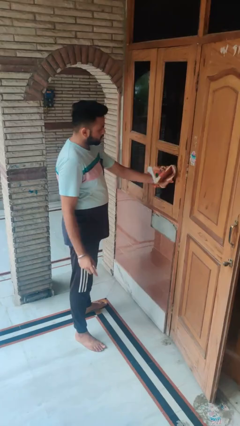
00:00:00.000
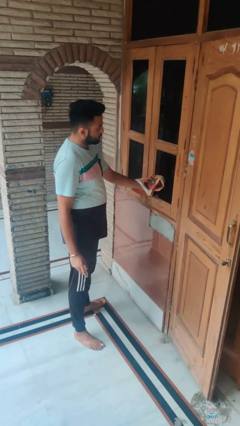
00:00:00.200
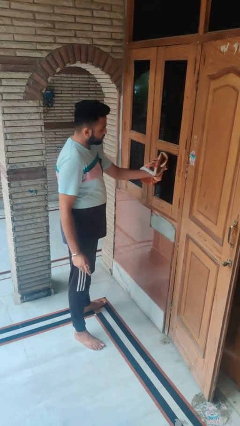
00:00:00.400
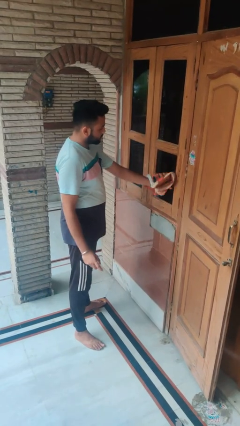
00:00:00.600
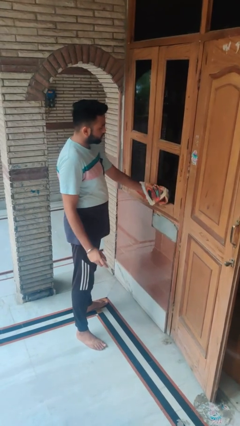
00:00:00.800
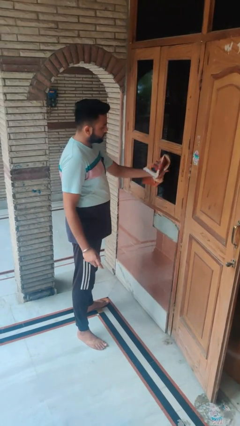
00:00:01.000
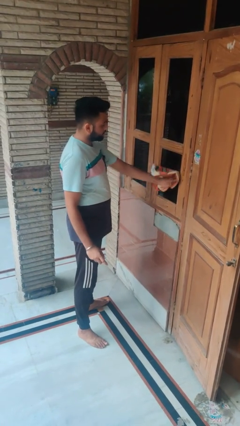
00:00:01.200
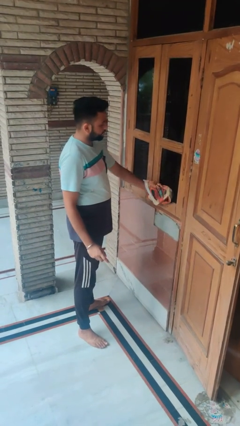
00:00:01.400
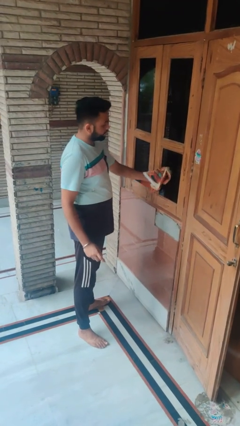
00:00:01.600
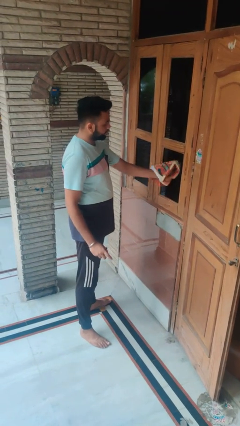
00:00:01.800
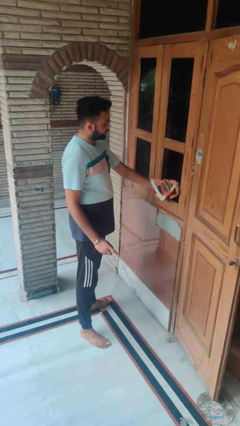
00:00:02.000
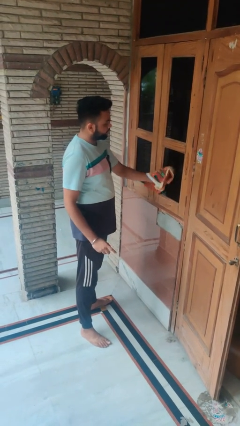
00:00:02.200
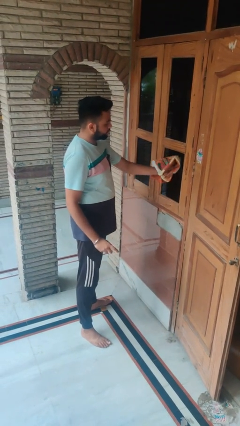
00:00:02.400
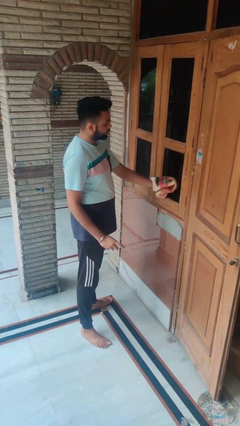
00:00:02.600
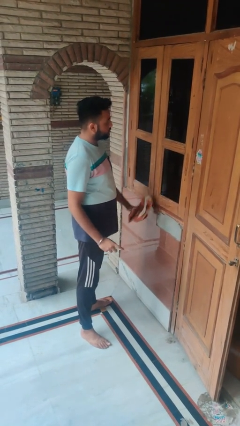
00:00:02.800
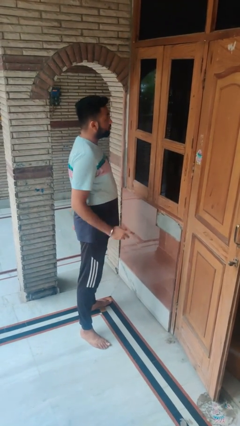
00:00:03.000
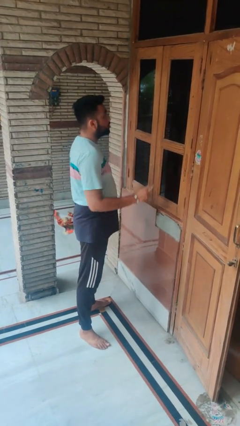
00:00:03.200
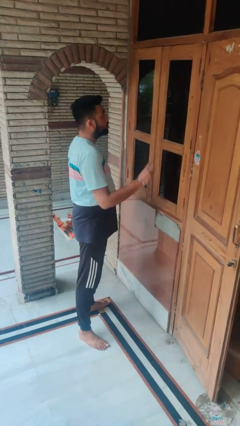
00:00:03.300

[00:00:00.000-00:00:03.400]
person washes window

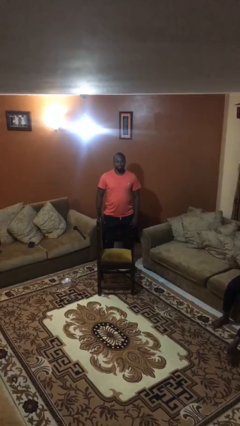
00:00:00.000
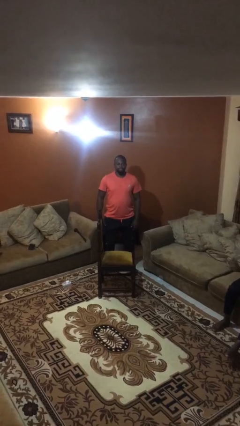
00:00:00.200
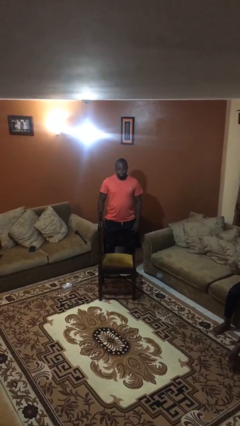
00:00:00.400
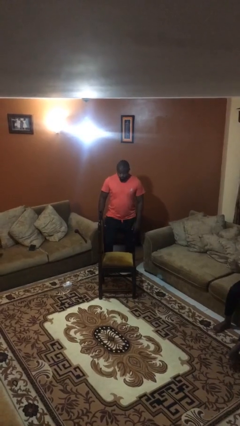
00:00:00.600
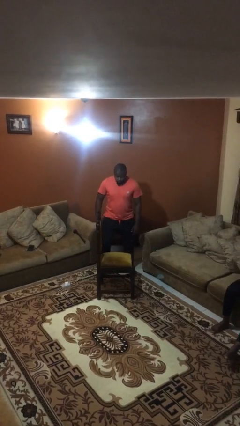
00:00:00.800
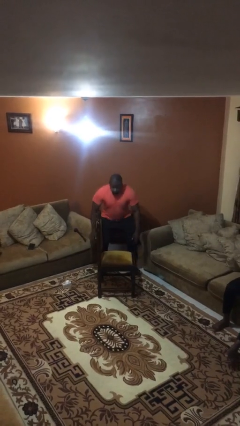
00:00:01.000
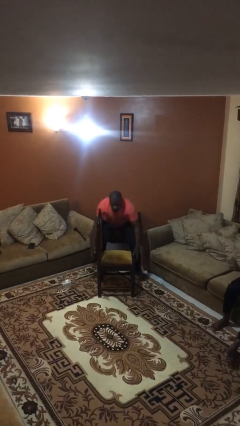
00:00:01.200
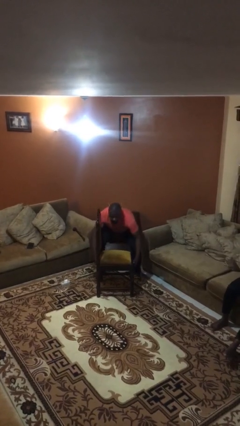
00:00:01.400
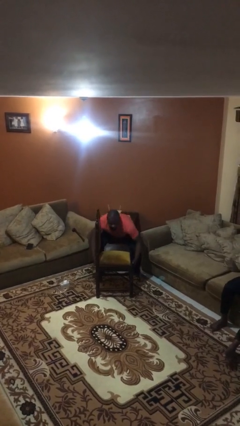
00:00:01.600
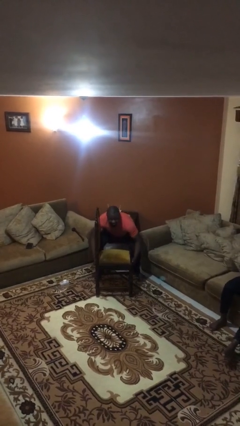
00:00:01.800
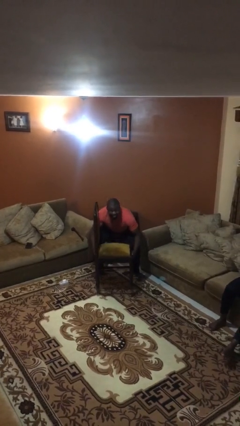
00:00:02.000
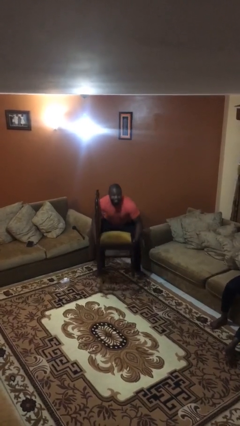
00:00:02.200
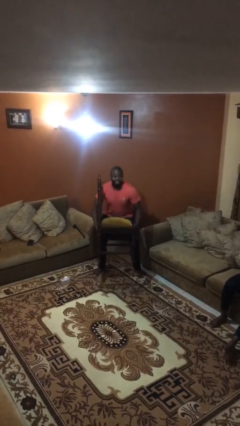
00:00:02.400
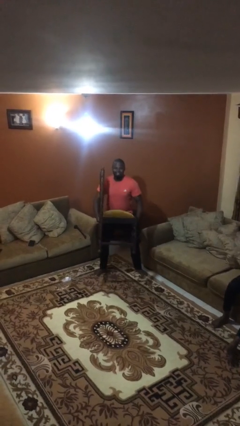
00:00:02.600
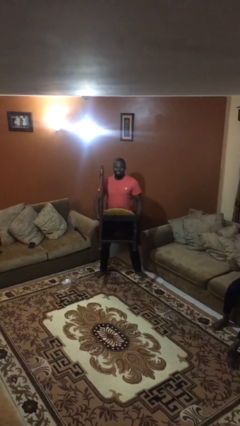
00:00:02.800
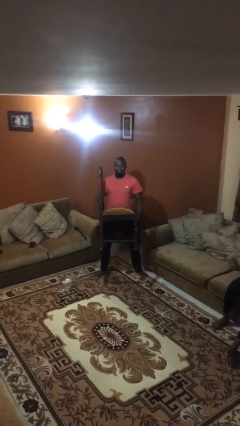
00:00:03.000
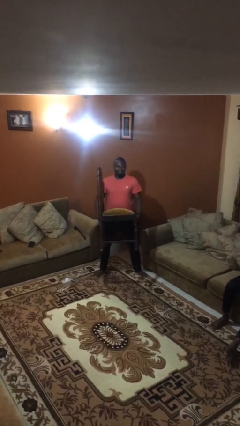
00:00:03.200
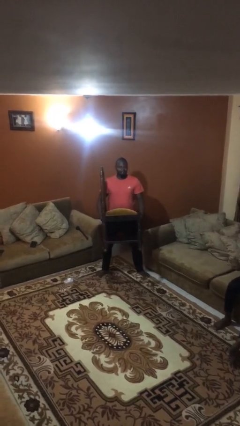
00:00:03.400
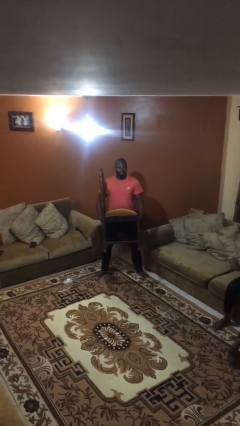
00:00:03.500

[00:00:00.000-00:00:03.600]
person picks up object from floor

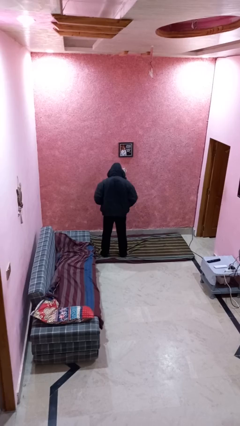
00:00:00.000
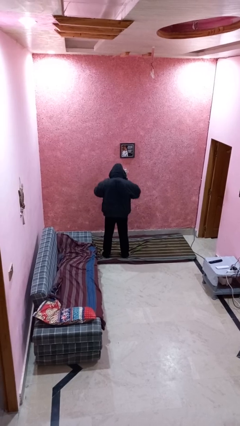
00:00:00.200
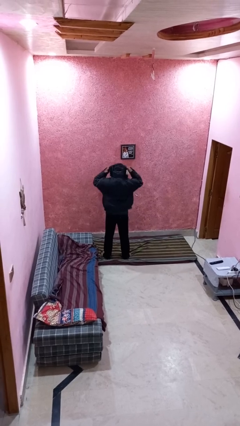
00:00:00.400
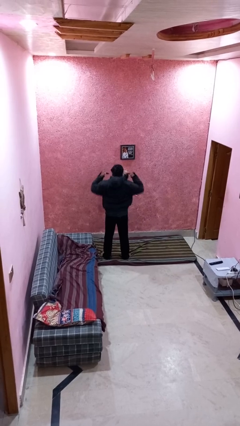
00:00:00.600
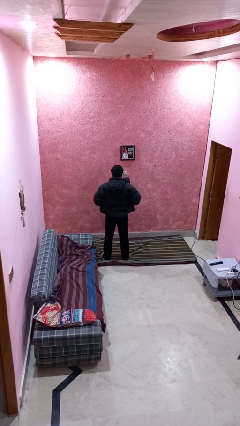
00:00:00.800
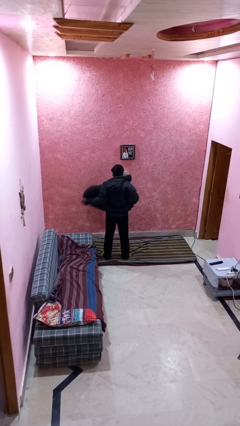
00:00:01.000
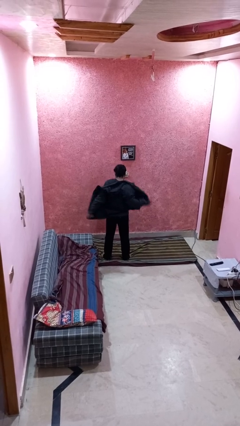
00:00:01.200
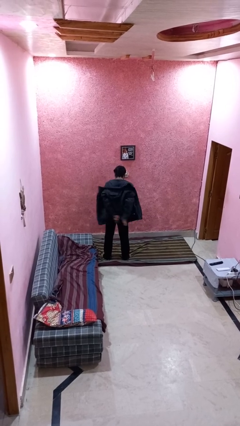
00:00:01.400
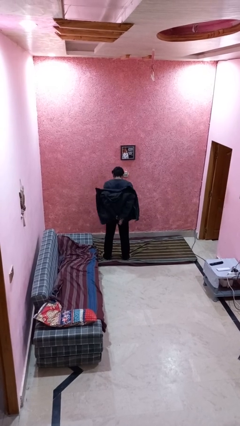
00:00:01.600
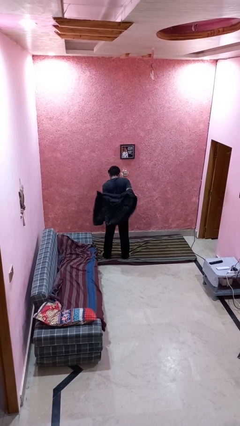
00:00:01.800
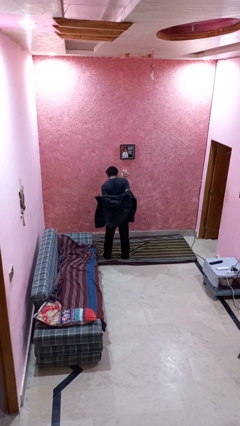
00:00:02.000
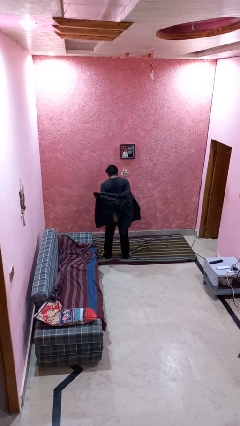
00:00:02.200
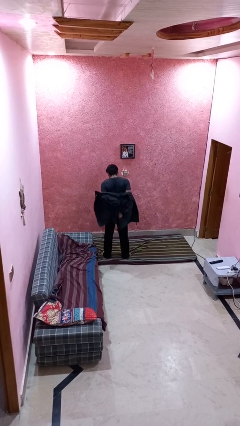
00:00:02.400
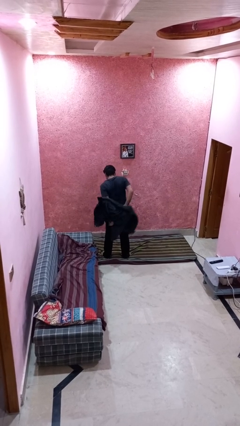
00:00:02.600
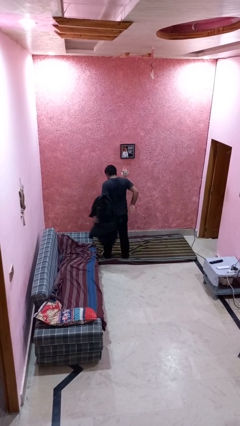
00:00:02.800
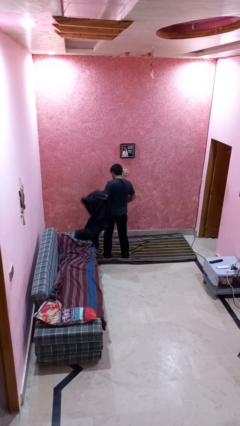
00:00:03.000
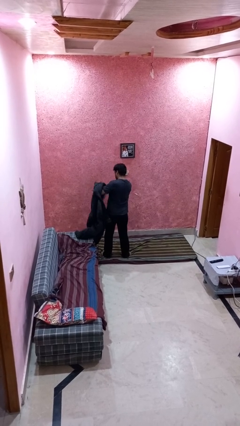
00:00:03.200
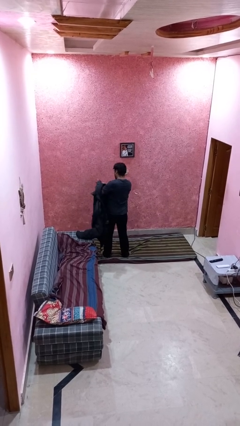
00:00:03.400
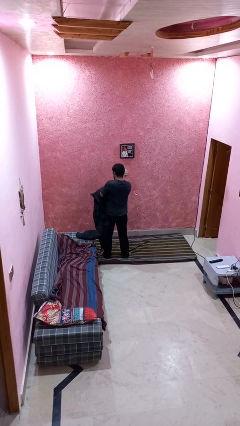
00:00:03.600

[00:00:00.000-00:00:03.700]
person takes off hoodie

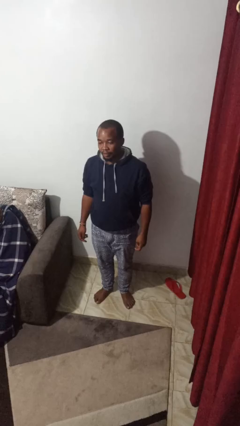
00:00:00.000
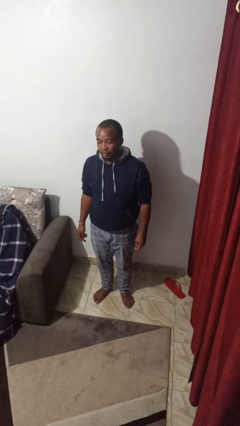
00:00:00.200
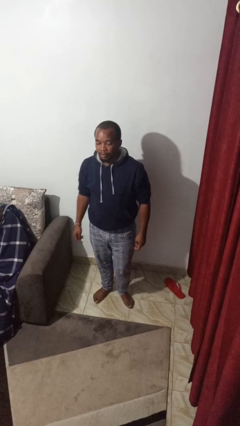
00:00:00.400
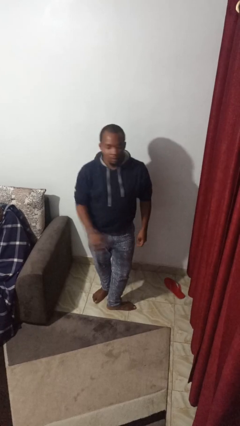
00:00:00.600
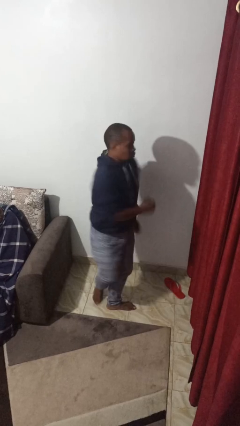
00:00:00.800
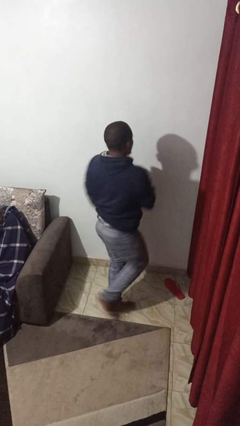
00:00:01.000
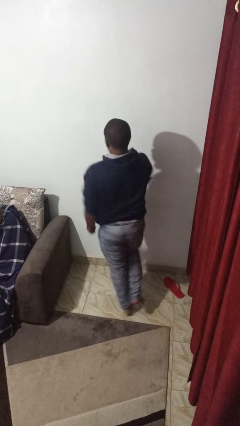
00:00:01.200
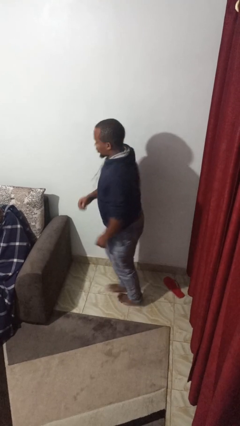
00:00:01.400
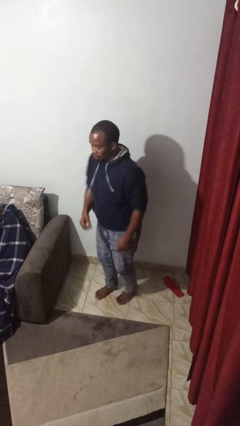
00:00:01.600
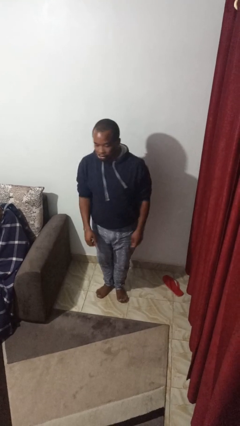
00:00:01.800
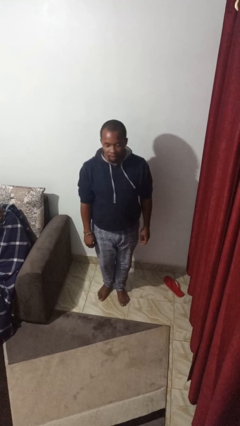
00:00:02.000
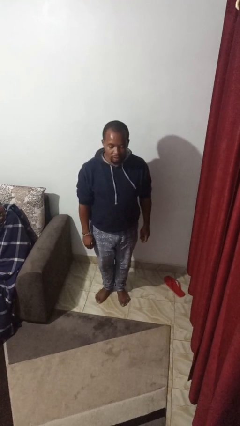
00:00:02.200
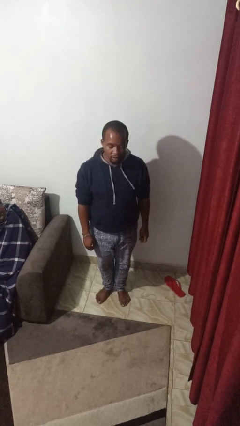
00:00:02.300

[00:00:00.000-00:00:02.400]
person twirls

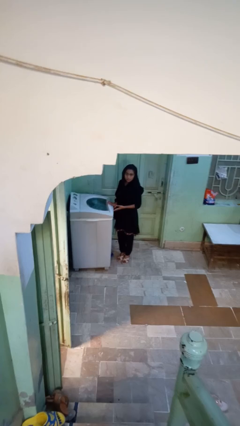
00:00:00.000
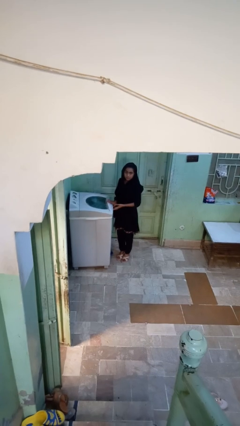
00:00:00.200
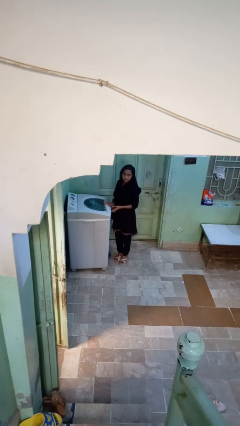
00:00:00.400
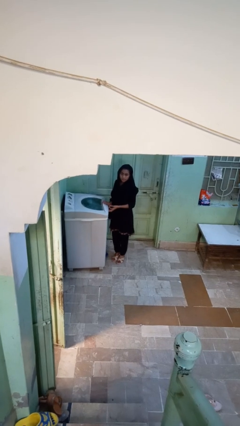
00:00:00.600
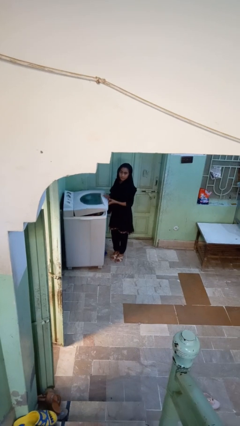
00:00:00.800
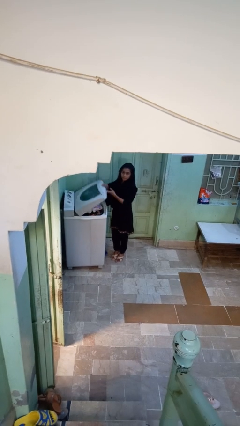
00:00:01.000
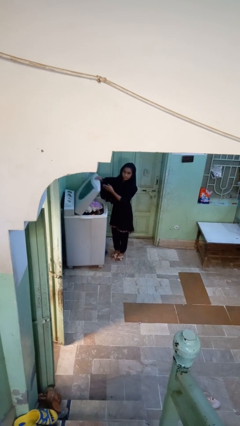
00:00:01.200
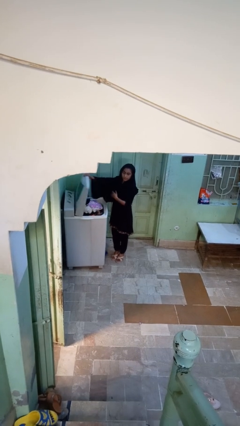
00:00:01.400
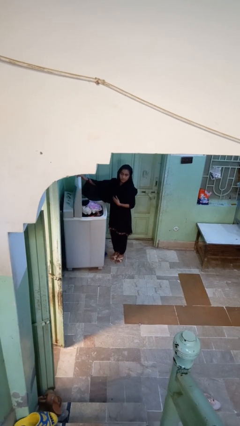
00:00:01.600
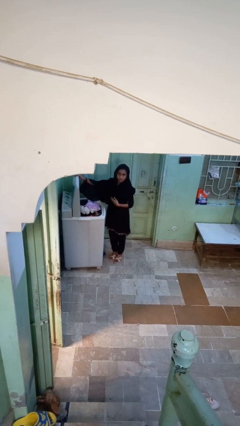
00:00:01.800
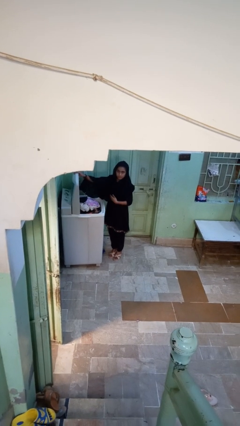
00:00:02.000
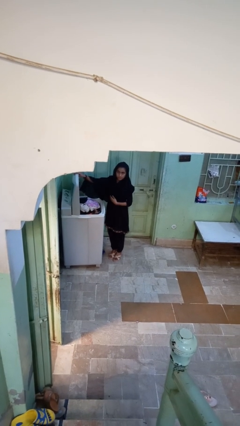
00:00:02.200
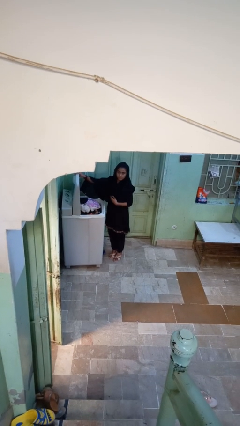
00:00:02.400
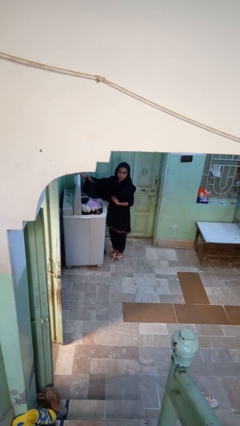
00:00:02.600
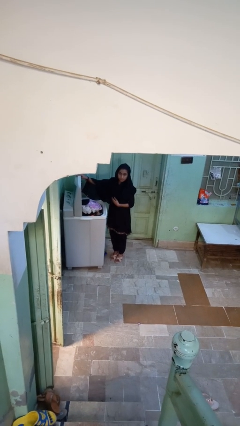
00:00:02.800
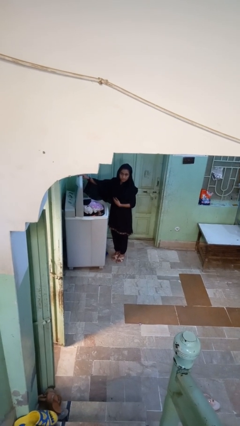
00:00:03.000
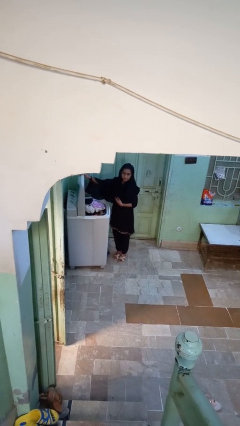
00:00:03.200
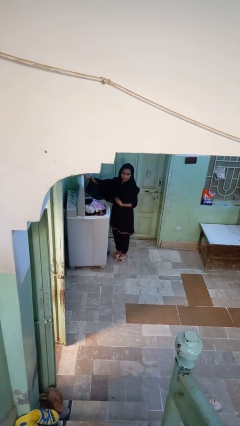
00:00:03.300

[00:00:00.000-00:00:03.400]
person opens clothes washer

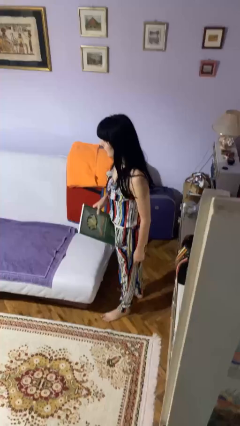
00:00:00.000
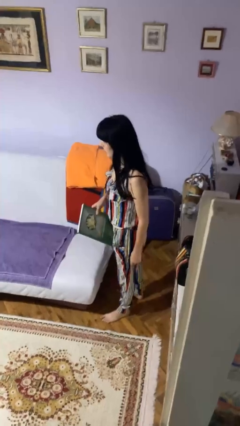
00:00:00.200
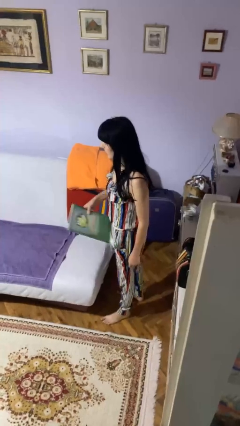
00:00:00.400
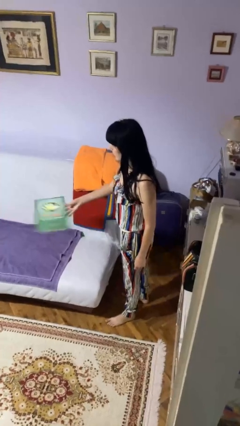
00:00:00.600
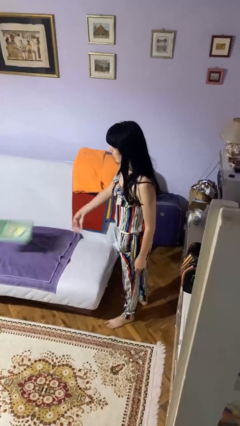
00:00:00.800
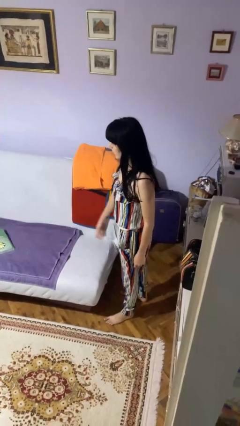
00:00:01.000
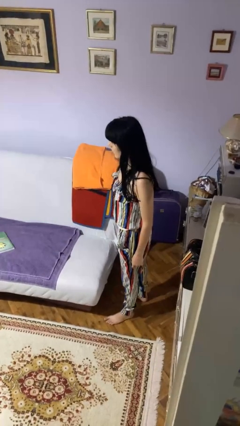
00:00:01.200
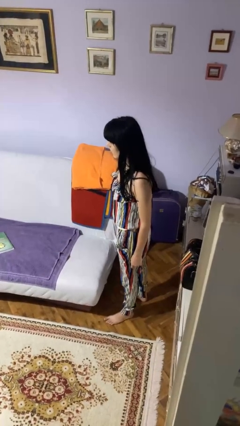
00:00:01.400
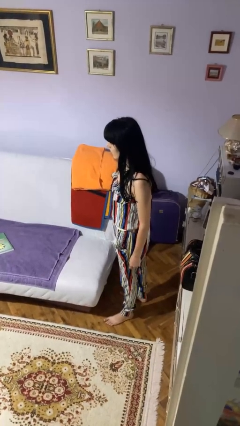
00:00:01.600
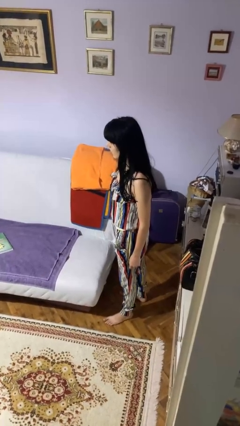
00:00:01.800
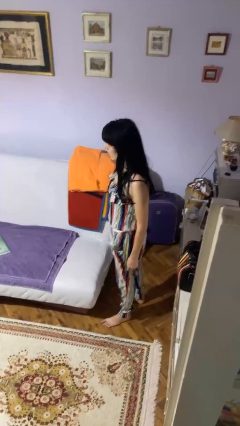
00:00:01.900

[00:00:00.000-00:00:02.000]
person throws object on bed
